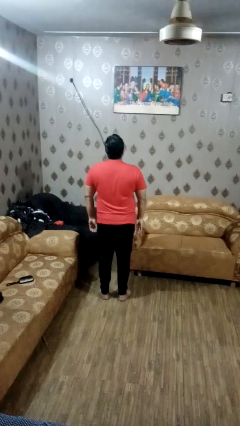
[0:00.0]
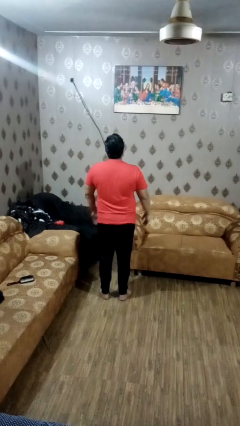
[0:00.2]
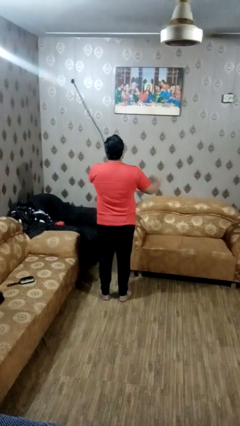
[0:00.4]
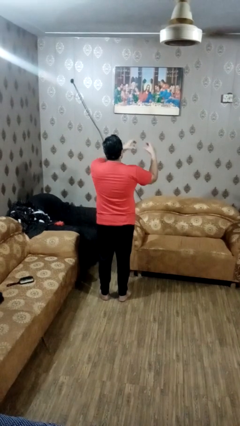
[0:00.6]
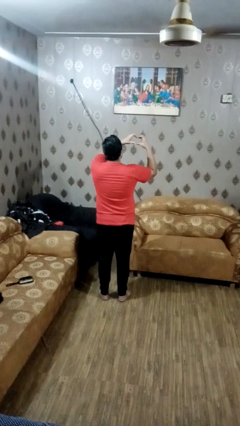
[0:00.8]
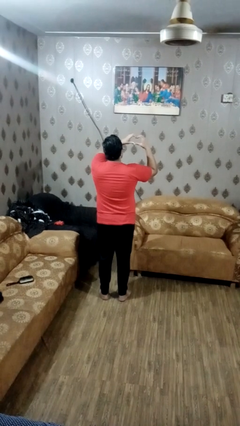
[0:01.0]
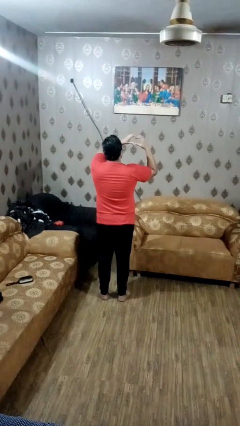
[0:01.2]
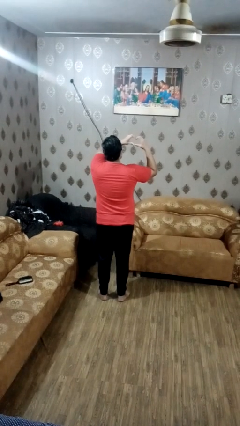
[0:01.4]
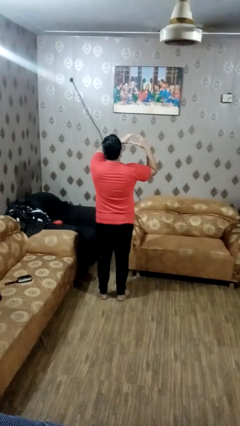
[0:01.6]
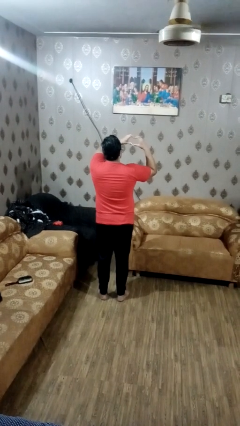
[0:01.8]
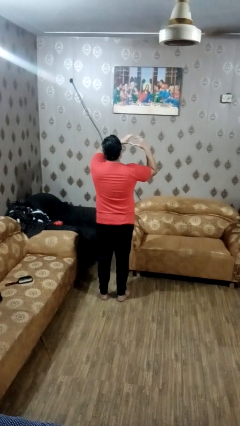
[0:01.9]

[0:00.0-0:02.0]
person gestures heart

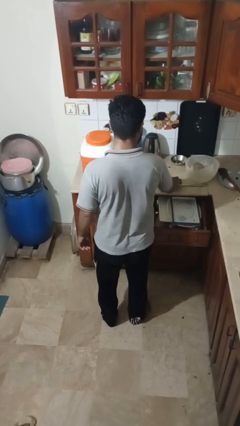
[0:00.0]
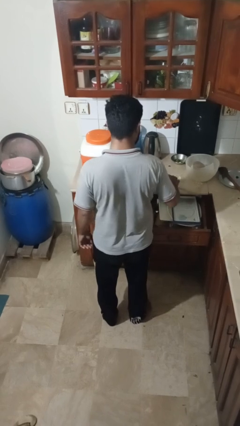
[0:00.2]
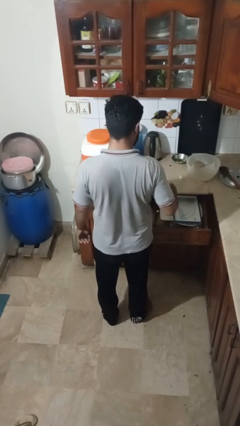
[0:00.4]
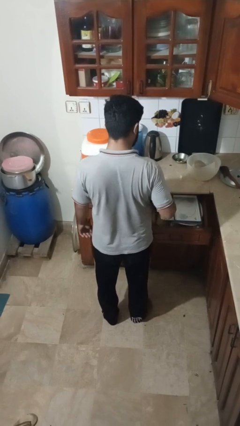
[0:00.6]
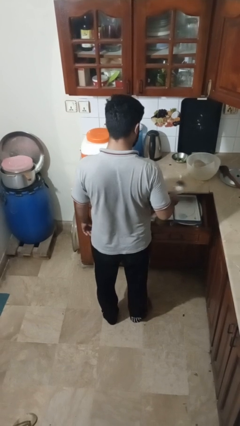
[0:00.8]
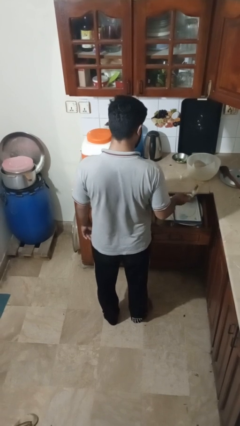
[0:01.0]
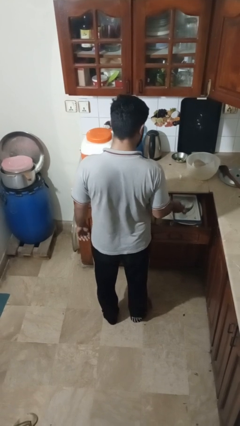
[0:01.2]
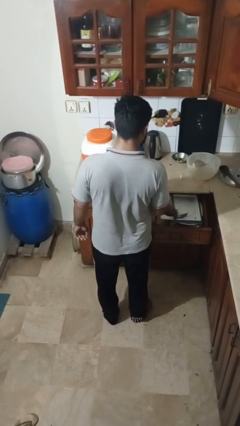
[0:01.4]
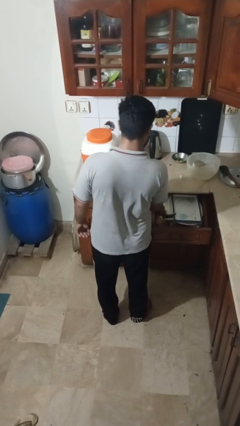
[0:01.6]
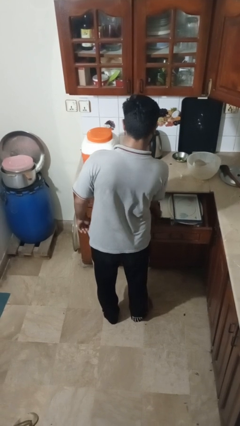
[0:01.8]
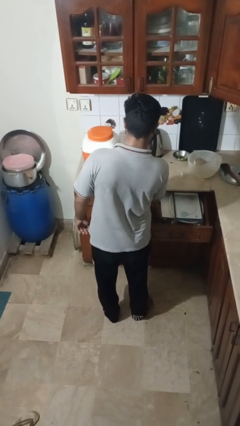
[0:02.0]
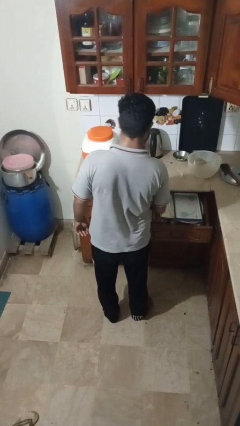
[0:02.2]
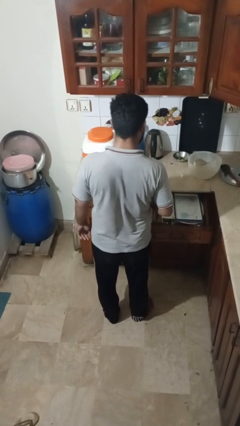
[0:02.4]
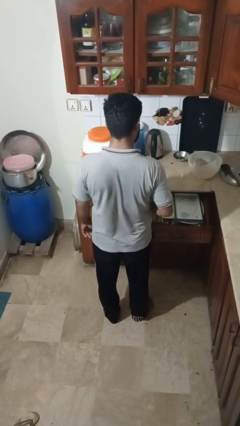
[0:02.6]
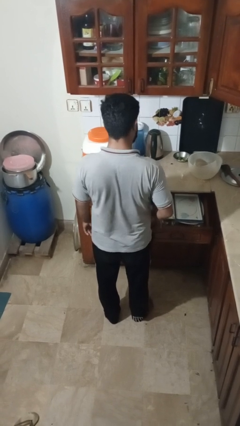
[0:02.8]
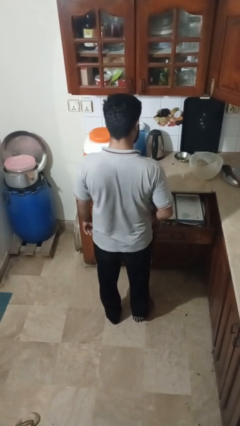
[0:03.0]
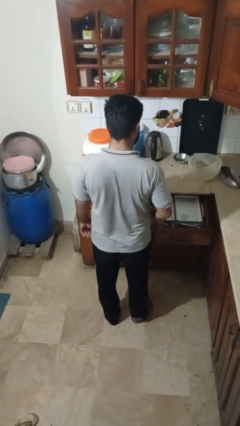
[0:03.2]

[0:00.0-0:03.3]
person puts object into kitchen drawer

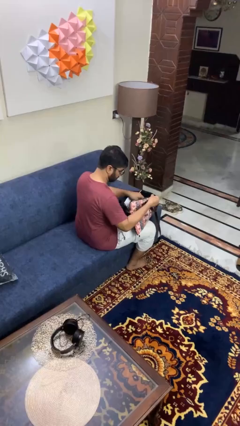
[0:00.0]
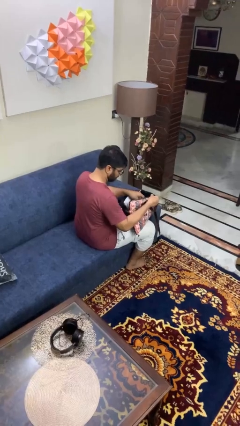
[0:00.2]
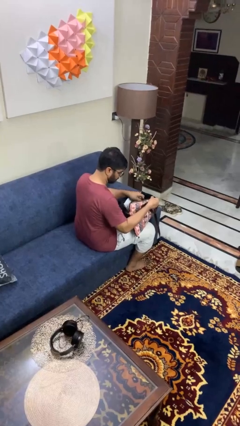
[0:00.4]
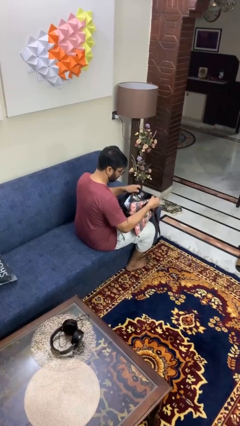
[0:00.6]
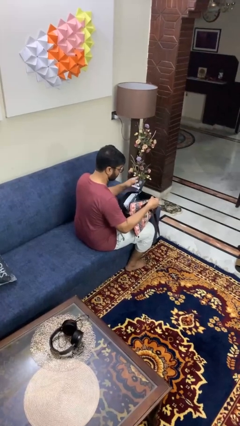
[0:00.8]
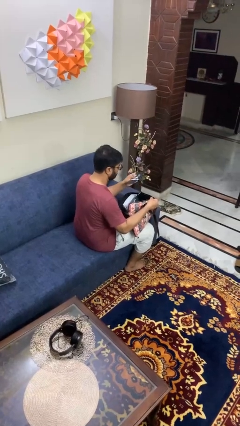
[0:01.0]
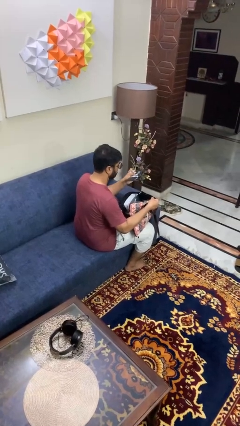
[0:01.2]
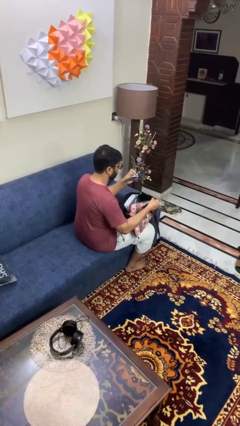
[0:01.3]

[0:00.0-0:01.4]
person takes object from purse

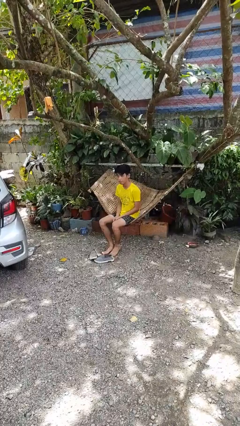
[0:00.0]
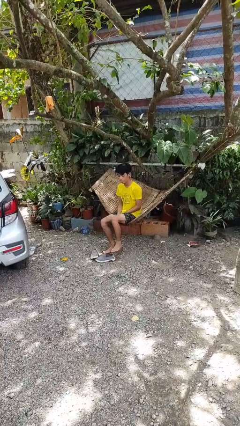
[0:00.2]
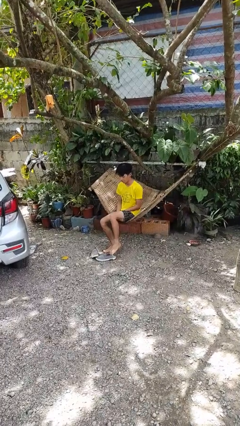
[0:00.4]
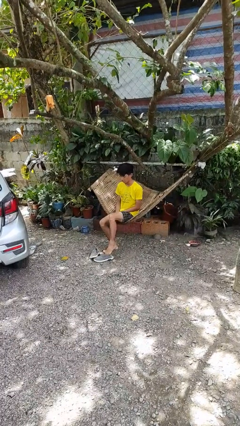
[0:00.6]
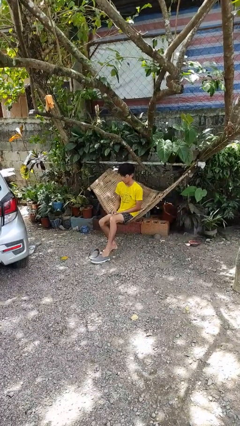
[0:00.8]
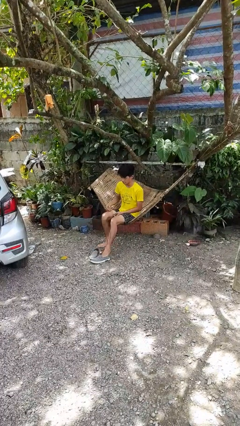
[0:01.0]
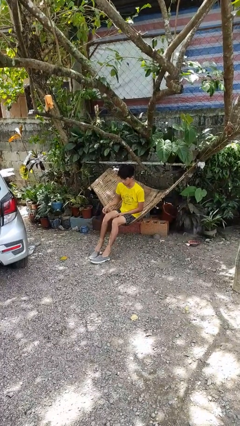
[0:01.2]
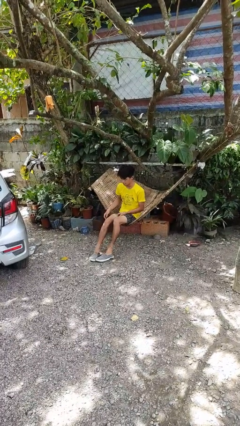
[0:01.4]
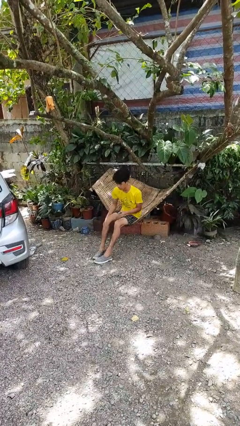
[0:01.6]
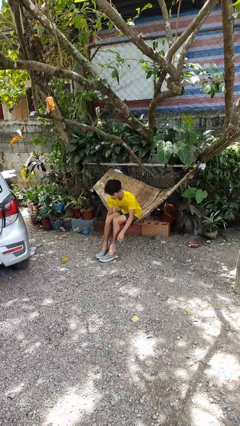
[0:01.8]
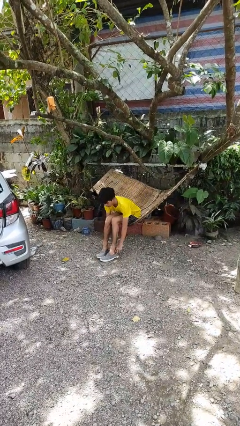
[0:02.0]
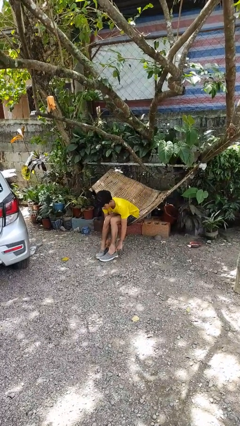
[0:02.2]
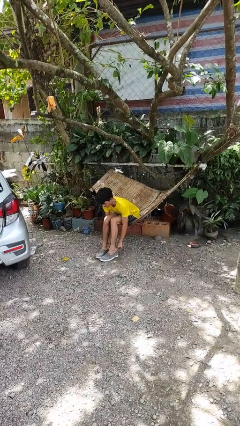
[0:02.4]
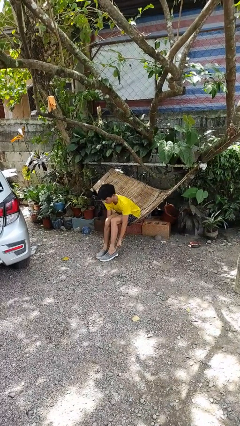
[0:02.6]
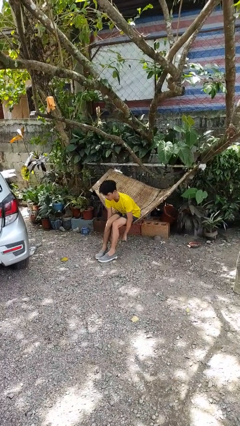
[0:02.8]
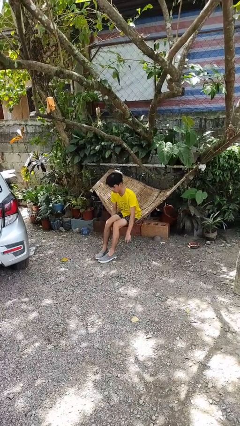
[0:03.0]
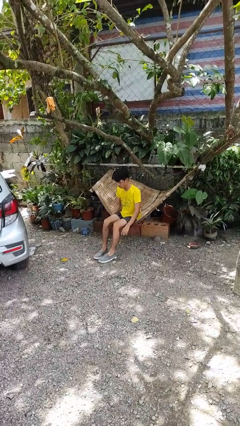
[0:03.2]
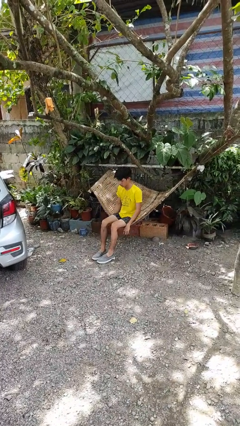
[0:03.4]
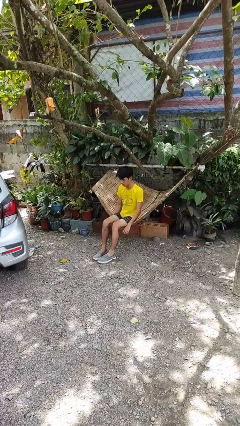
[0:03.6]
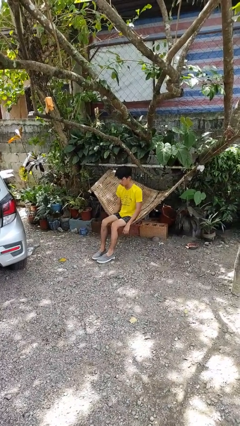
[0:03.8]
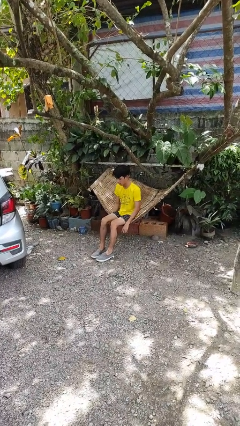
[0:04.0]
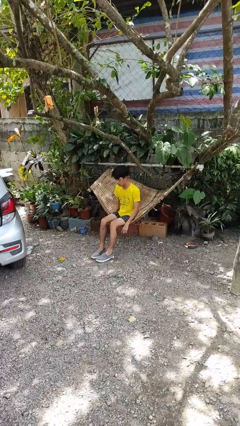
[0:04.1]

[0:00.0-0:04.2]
person puts on shoes

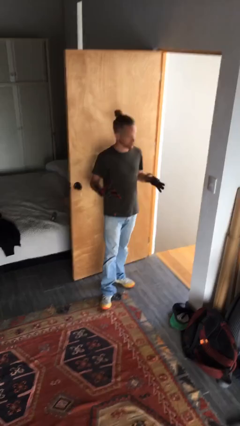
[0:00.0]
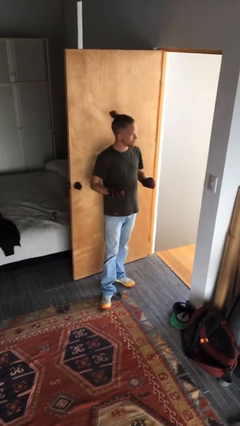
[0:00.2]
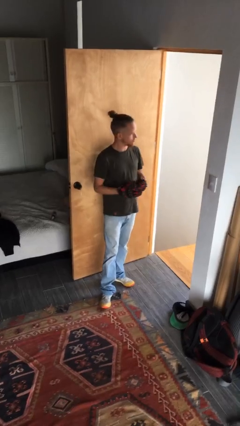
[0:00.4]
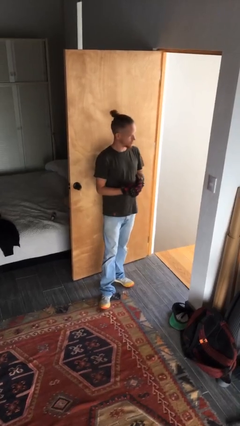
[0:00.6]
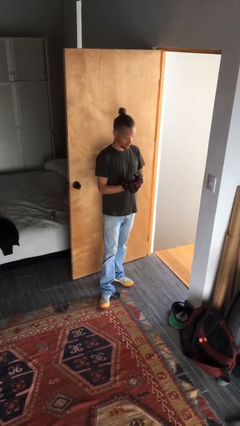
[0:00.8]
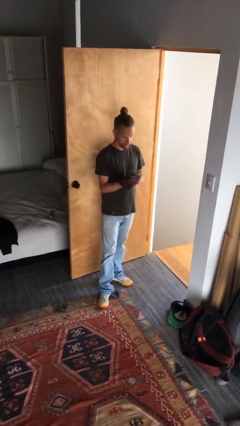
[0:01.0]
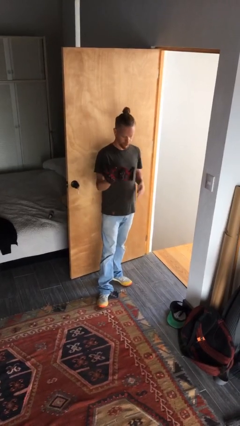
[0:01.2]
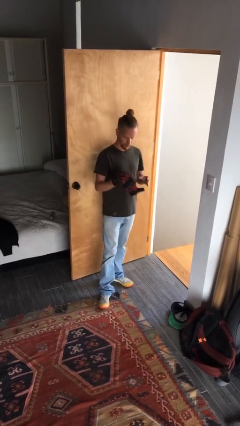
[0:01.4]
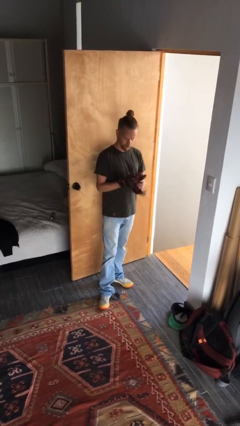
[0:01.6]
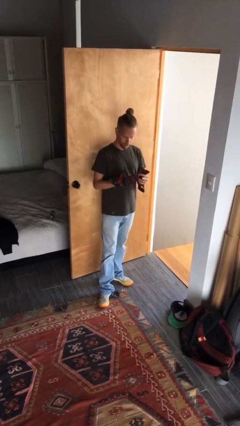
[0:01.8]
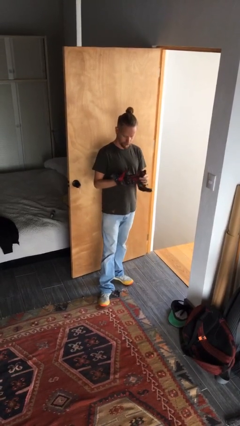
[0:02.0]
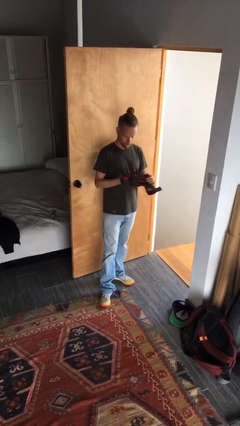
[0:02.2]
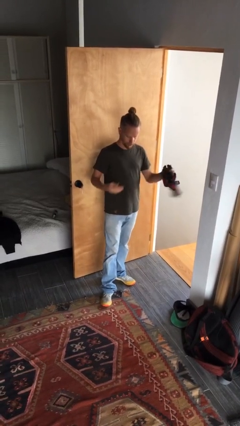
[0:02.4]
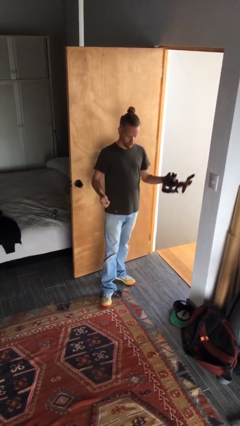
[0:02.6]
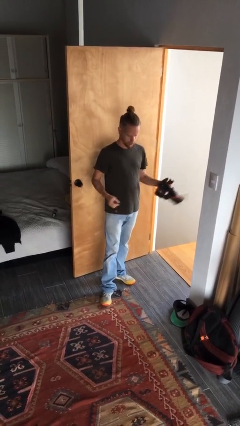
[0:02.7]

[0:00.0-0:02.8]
person takes off gloves

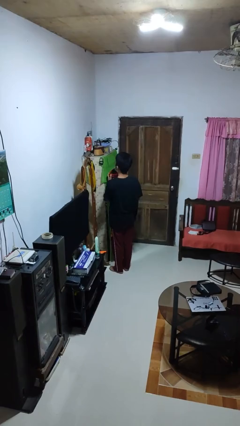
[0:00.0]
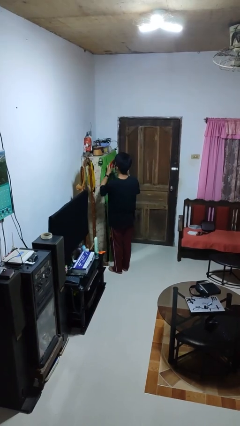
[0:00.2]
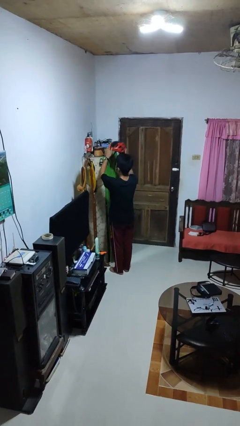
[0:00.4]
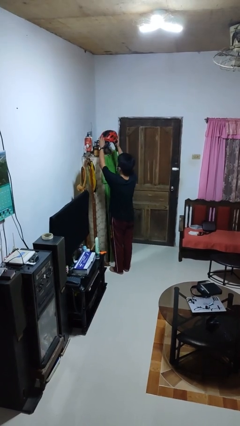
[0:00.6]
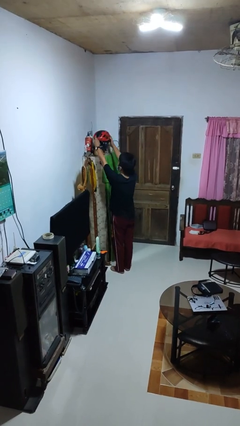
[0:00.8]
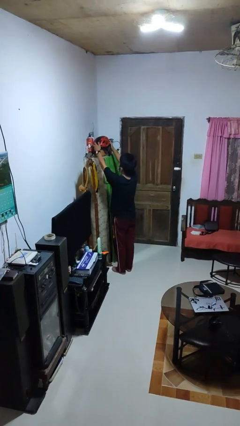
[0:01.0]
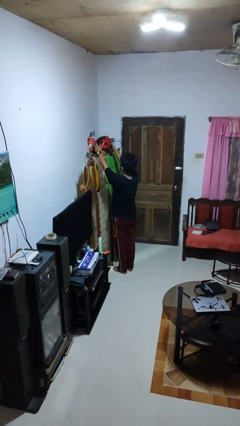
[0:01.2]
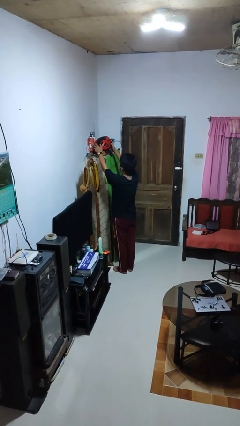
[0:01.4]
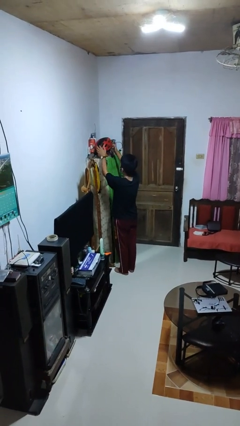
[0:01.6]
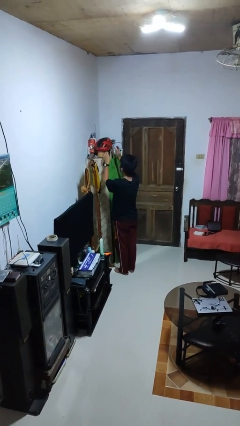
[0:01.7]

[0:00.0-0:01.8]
person puts down object on shelf

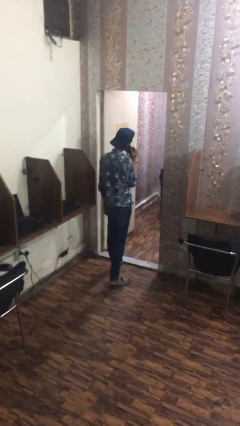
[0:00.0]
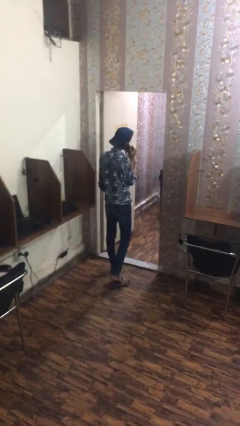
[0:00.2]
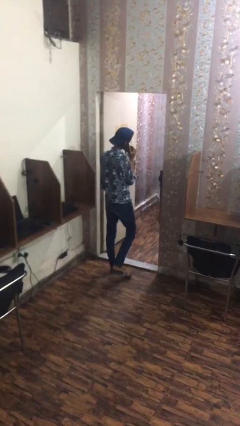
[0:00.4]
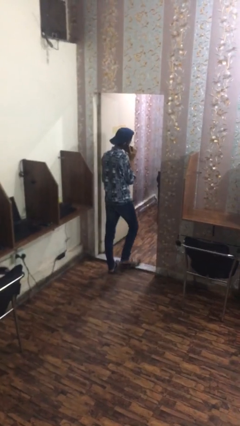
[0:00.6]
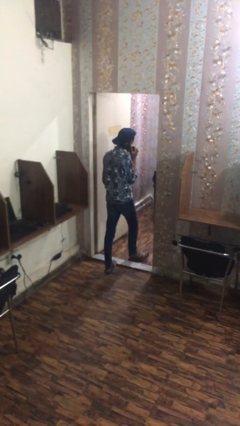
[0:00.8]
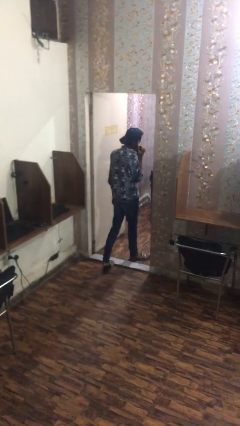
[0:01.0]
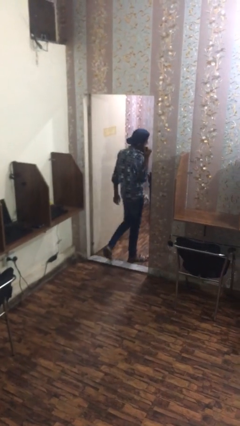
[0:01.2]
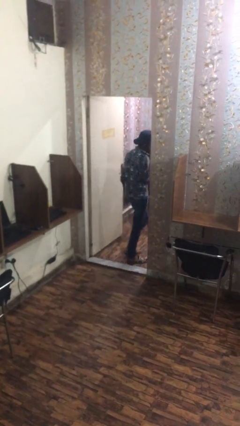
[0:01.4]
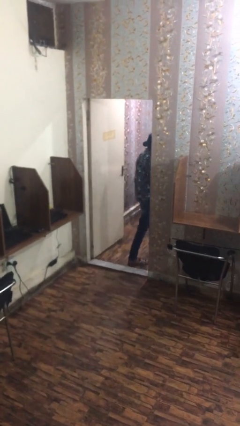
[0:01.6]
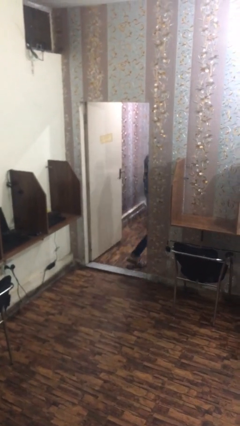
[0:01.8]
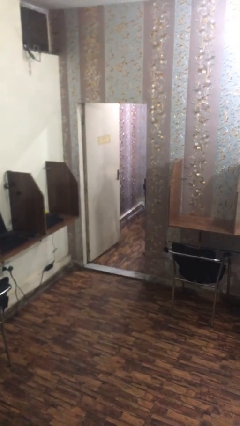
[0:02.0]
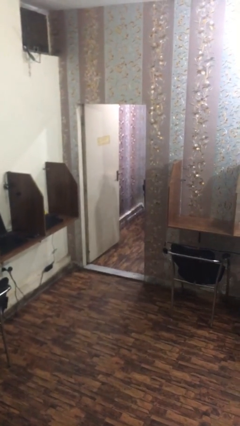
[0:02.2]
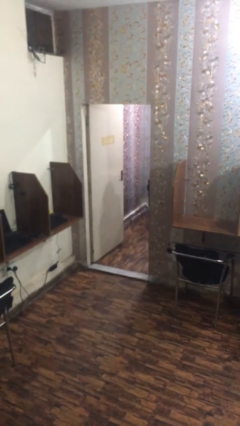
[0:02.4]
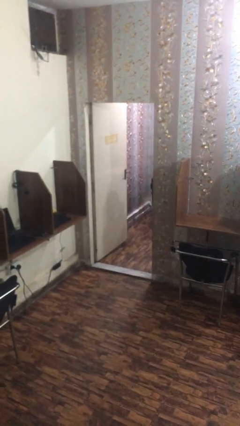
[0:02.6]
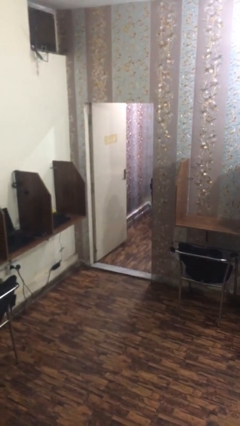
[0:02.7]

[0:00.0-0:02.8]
person exits scene through structure
